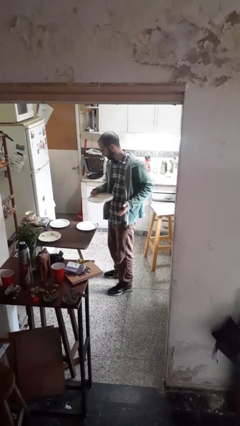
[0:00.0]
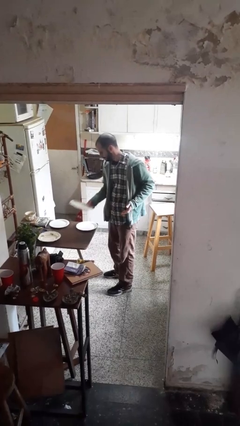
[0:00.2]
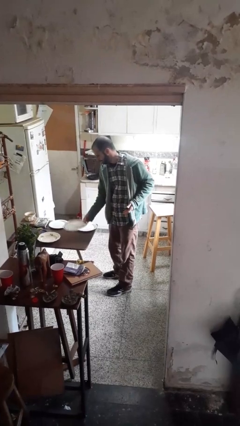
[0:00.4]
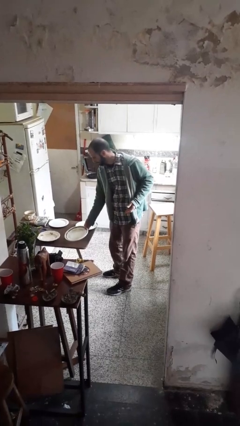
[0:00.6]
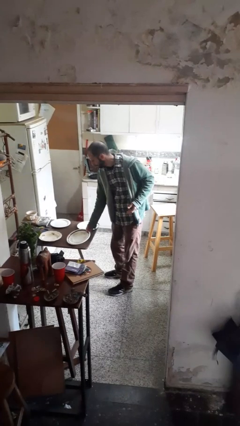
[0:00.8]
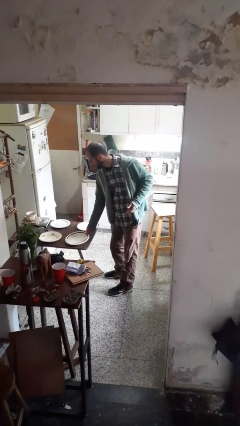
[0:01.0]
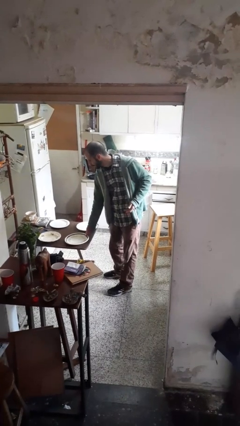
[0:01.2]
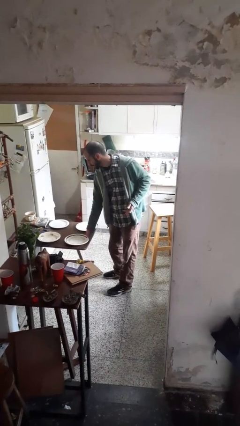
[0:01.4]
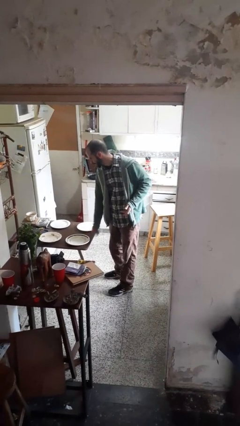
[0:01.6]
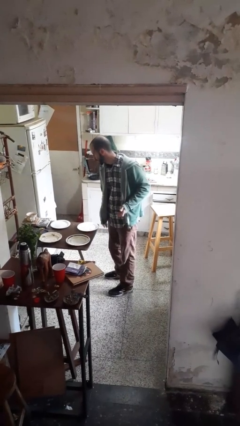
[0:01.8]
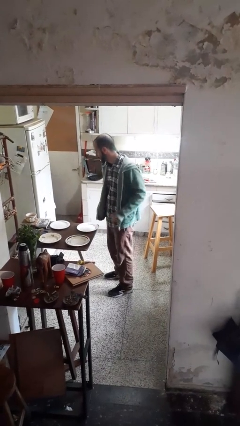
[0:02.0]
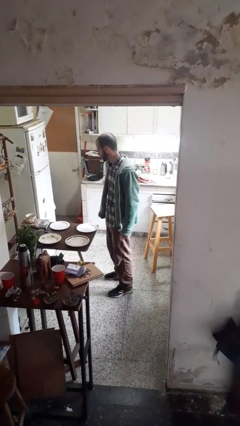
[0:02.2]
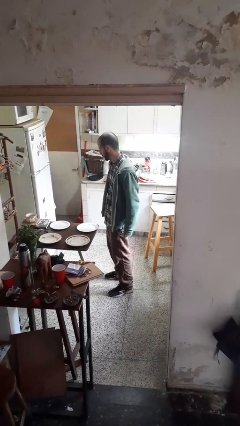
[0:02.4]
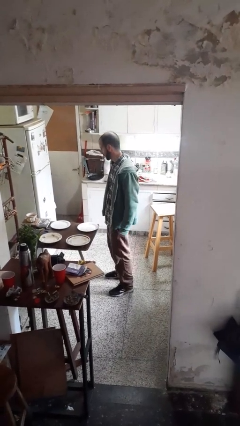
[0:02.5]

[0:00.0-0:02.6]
person sets table

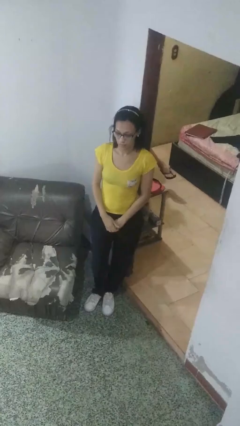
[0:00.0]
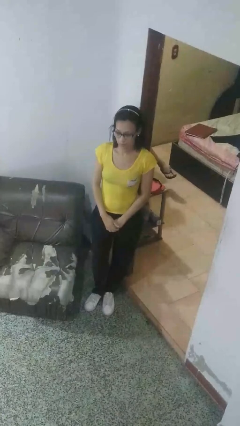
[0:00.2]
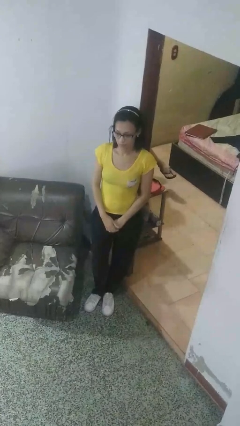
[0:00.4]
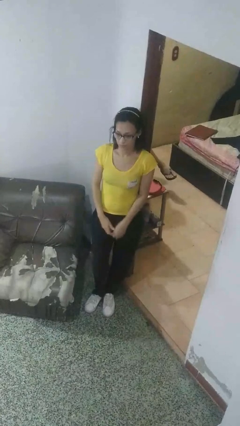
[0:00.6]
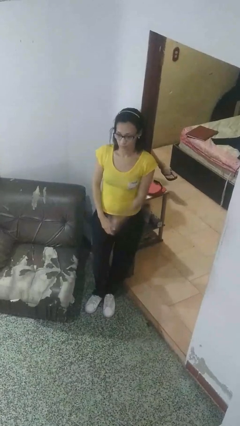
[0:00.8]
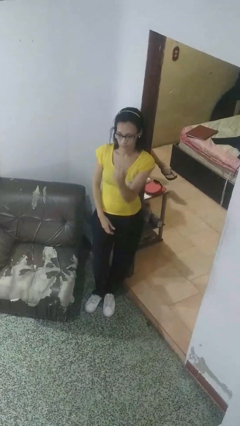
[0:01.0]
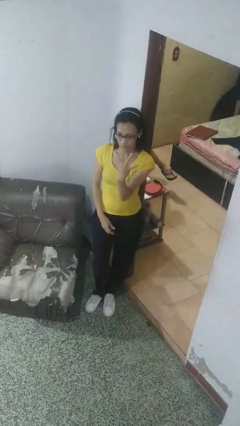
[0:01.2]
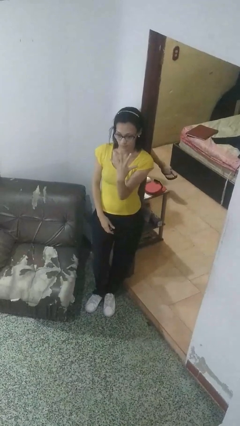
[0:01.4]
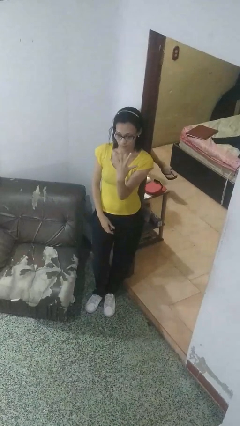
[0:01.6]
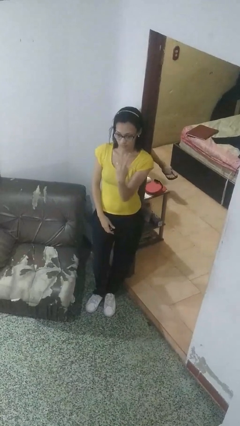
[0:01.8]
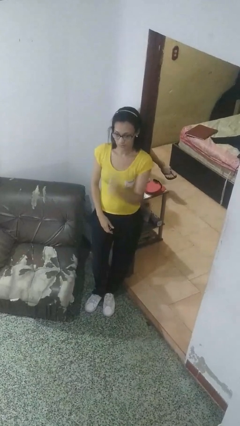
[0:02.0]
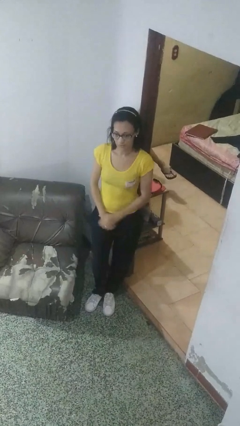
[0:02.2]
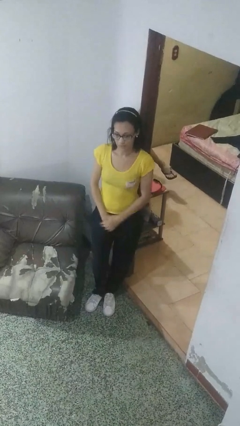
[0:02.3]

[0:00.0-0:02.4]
person gestures number five

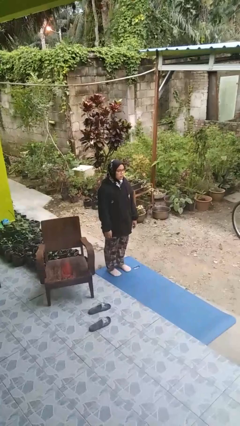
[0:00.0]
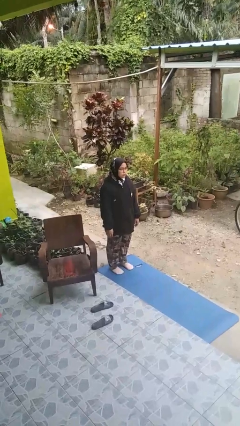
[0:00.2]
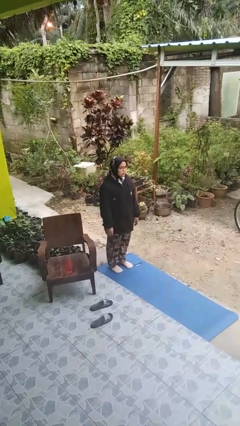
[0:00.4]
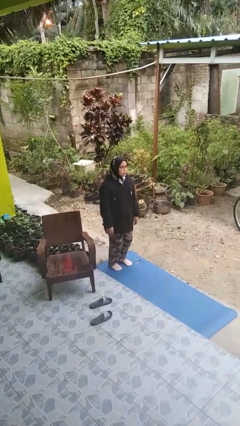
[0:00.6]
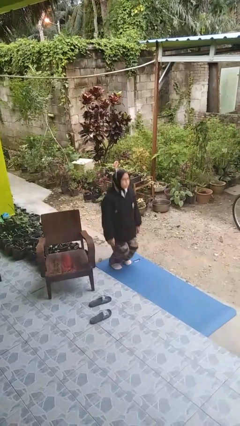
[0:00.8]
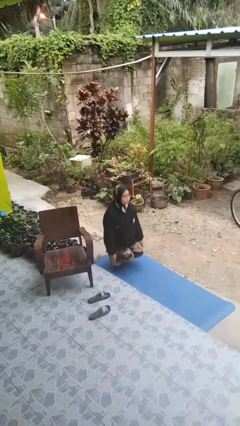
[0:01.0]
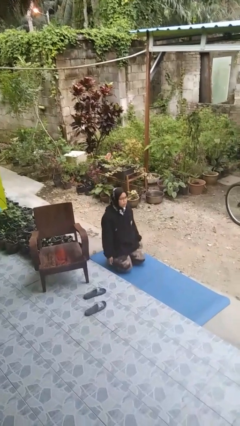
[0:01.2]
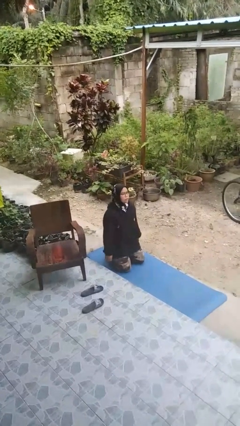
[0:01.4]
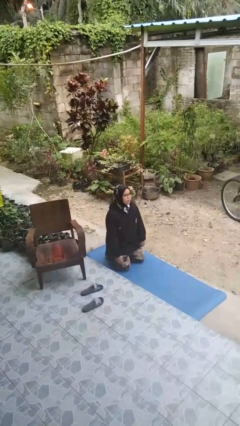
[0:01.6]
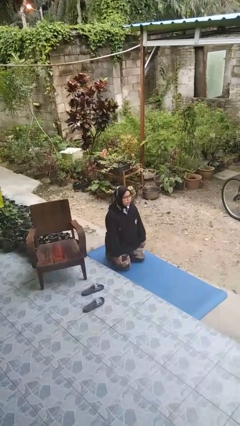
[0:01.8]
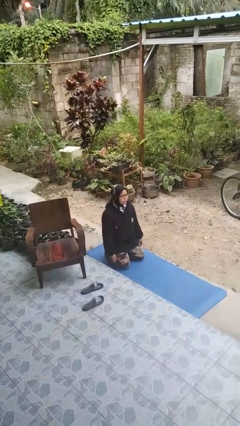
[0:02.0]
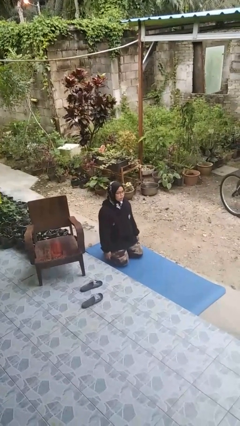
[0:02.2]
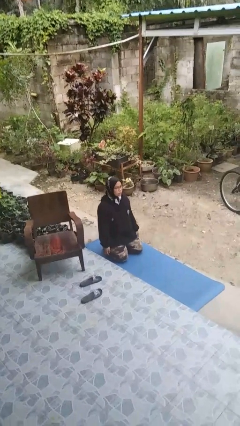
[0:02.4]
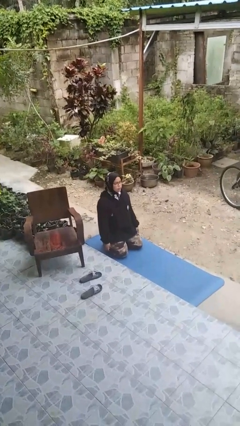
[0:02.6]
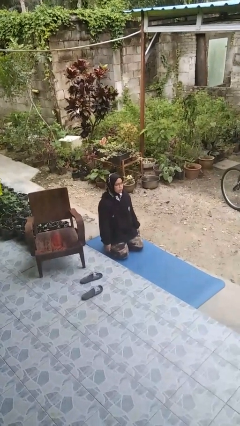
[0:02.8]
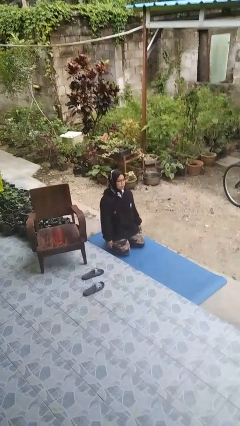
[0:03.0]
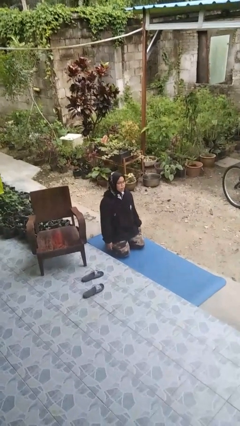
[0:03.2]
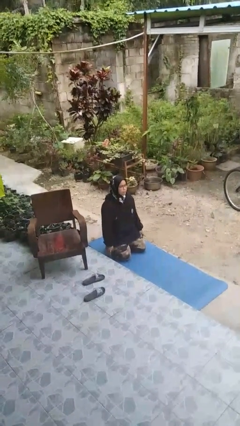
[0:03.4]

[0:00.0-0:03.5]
person kneels

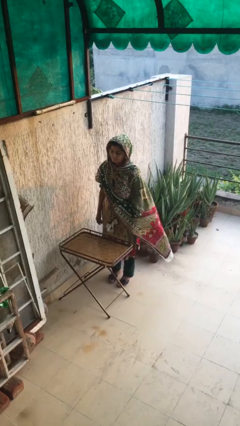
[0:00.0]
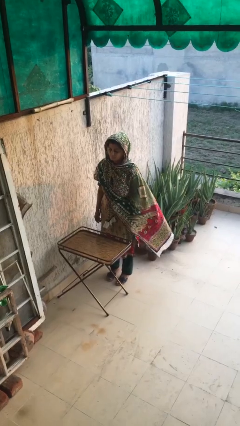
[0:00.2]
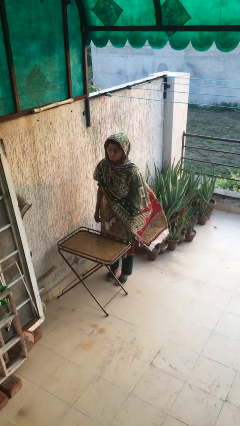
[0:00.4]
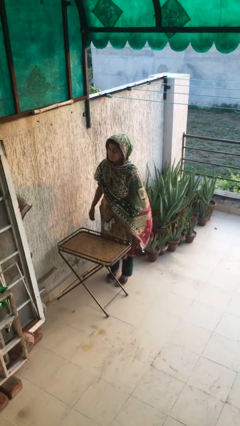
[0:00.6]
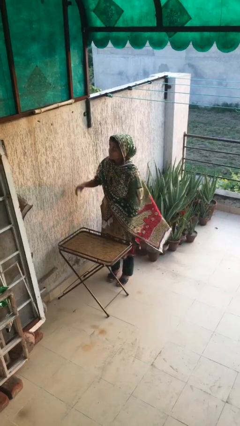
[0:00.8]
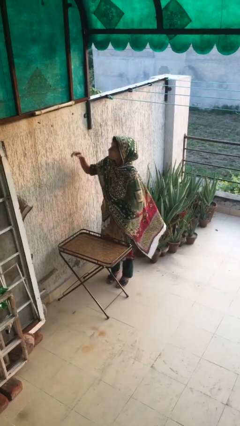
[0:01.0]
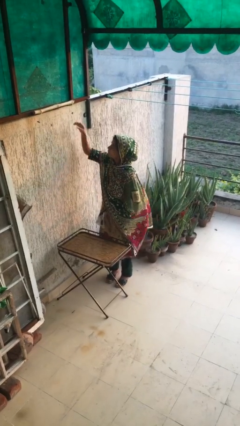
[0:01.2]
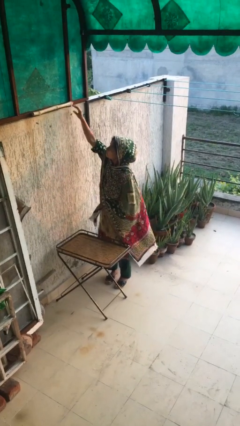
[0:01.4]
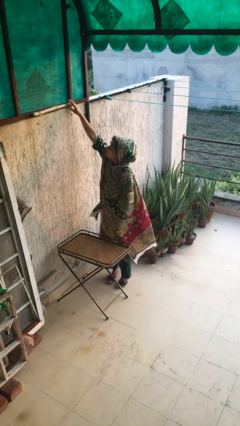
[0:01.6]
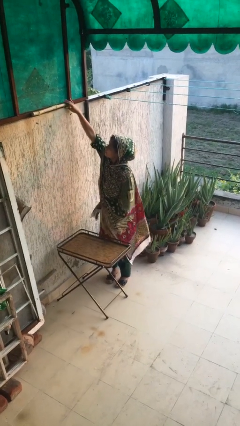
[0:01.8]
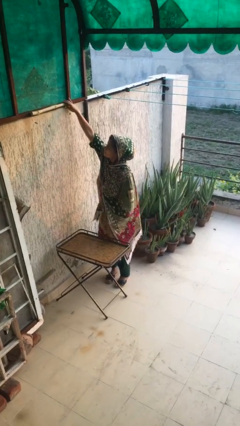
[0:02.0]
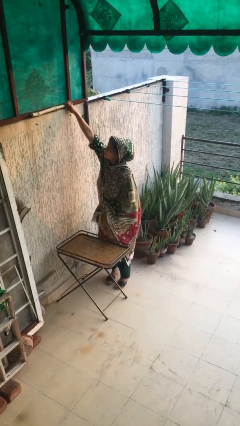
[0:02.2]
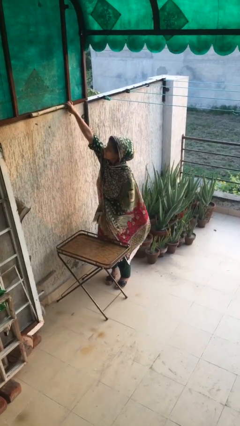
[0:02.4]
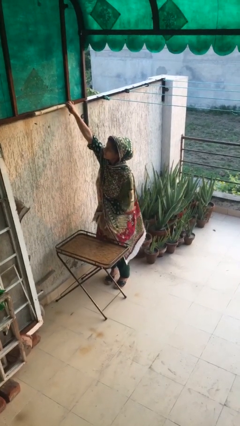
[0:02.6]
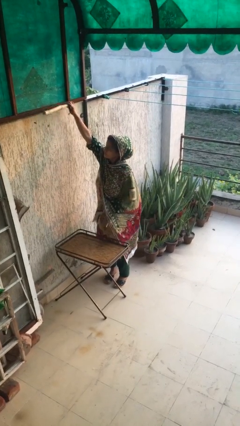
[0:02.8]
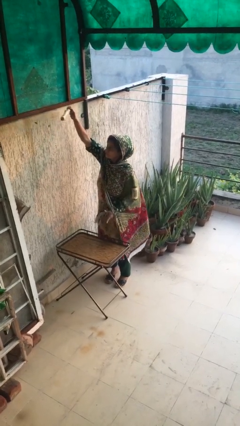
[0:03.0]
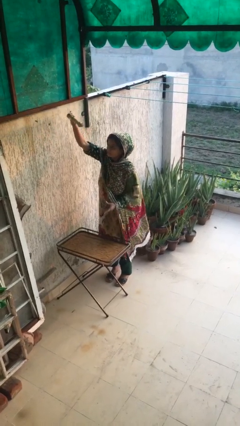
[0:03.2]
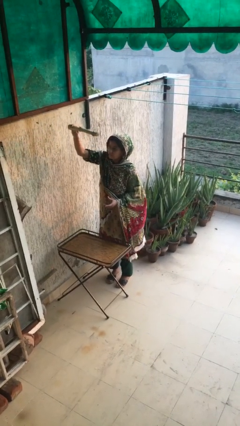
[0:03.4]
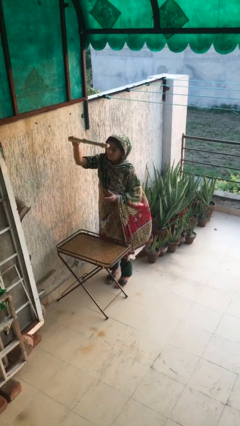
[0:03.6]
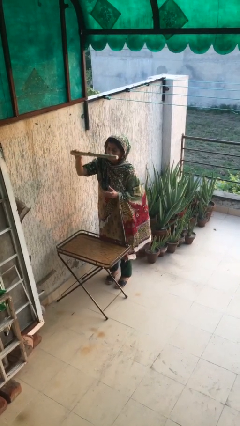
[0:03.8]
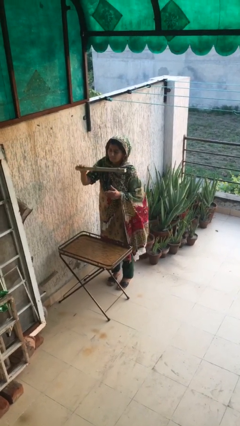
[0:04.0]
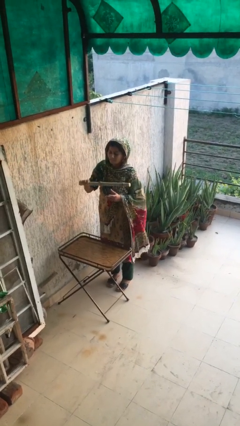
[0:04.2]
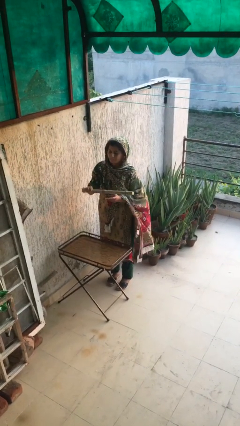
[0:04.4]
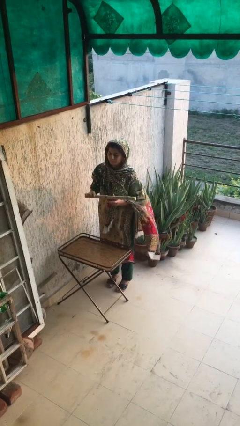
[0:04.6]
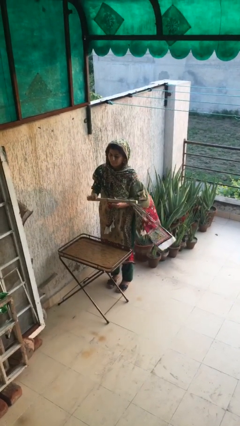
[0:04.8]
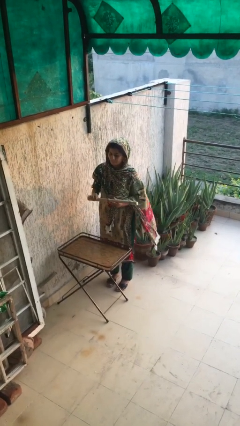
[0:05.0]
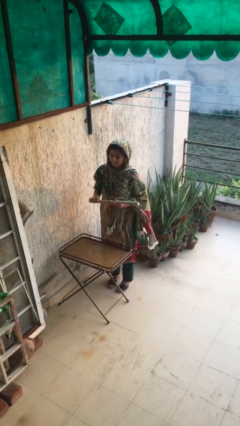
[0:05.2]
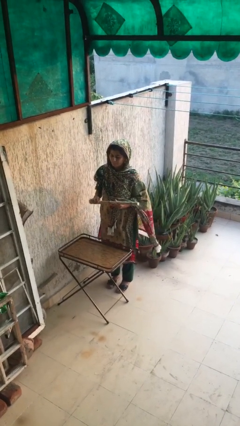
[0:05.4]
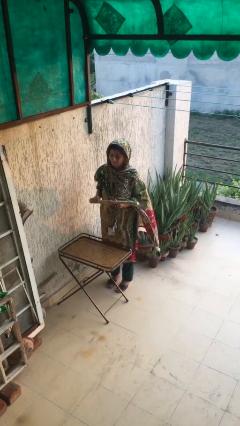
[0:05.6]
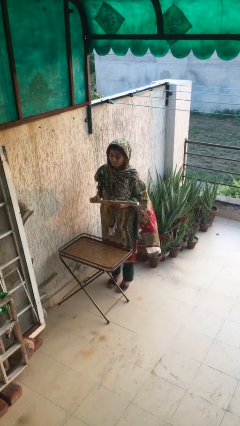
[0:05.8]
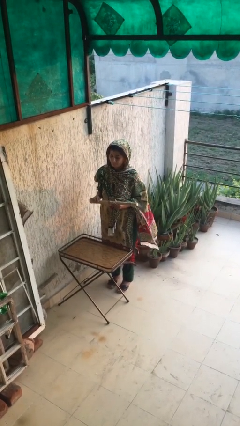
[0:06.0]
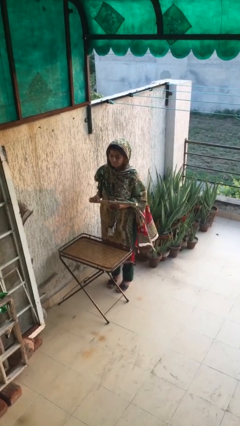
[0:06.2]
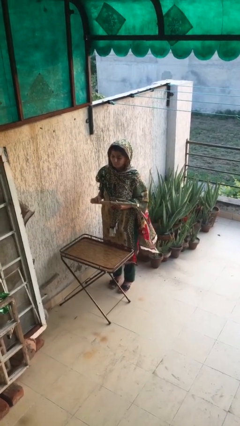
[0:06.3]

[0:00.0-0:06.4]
person picks up object from shelf

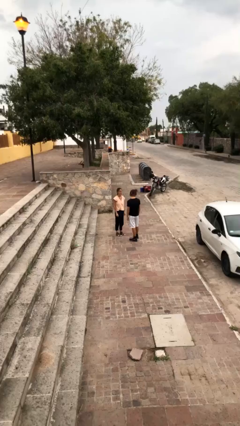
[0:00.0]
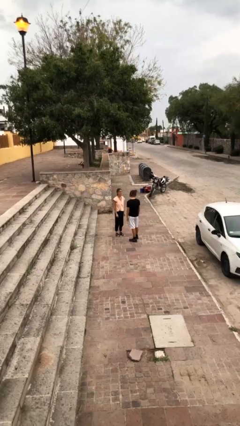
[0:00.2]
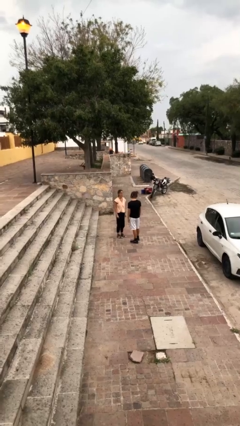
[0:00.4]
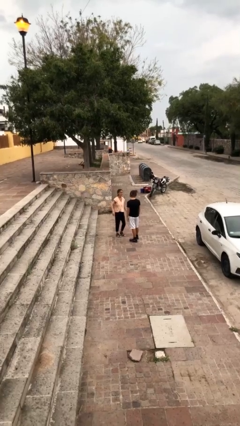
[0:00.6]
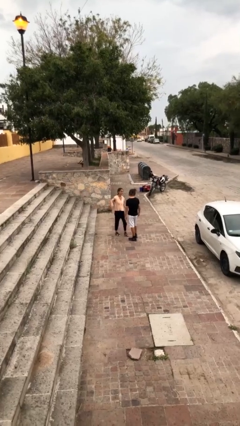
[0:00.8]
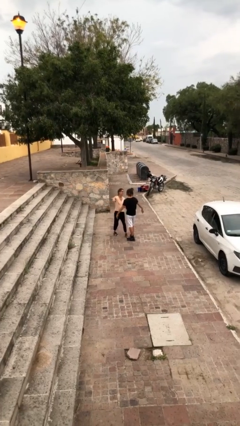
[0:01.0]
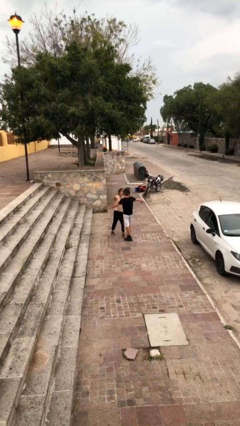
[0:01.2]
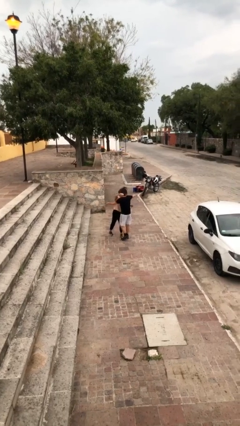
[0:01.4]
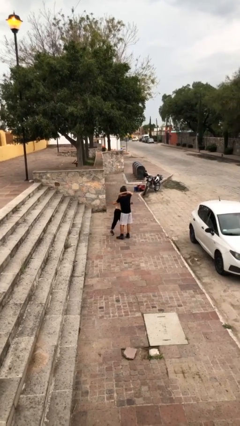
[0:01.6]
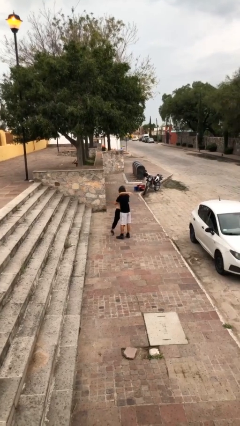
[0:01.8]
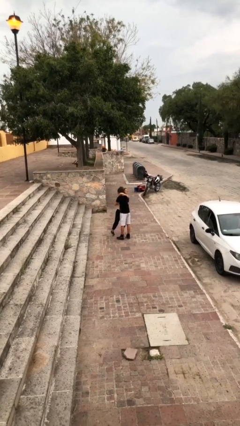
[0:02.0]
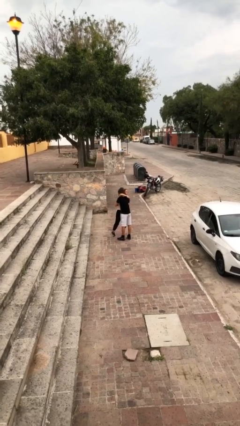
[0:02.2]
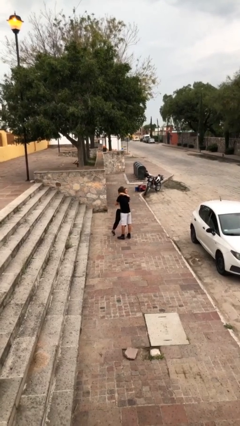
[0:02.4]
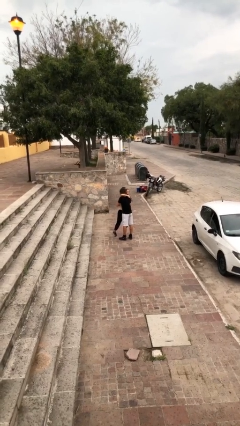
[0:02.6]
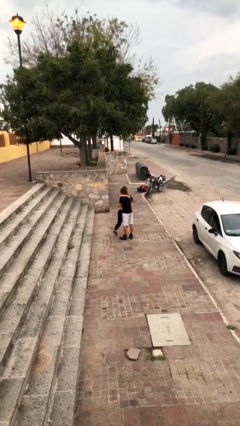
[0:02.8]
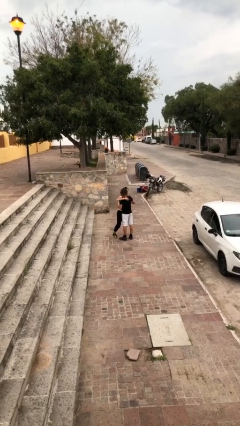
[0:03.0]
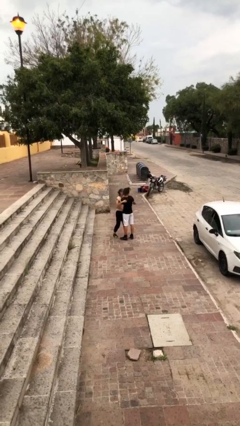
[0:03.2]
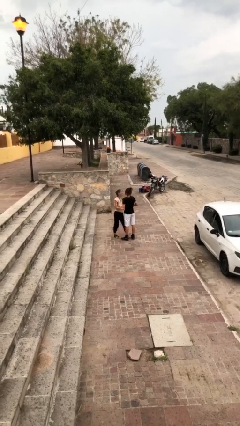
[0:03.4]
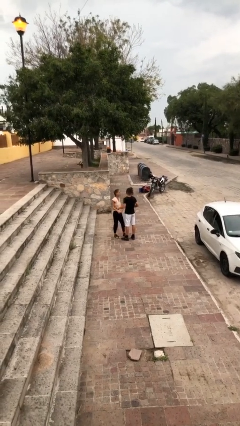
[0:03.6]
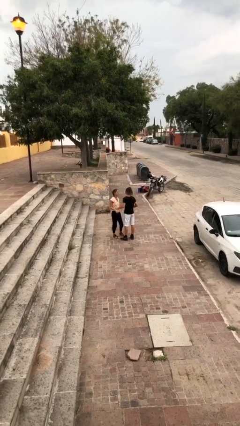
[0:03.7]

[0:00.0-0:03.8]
person embraces person
